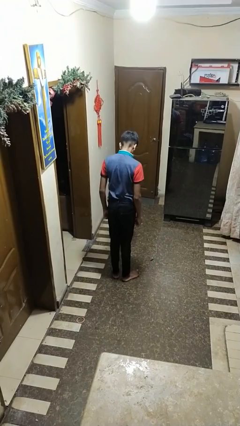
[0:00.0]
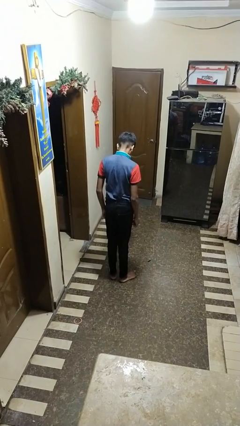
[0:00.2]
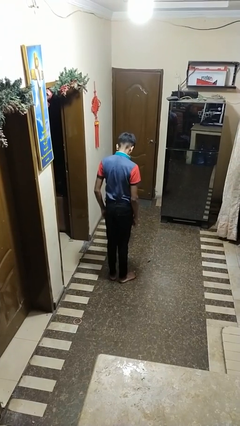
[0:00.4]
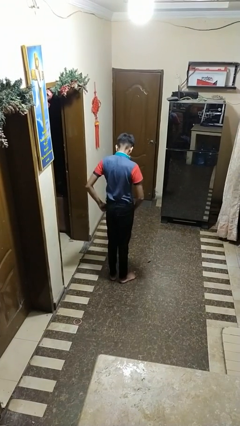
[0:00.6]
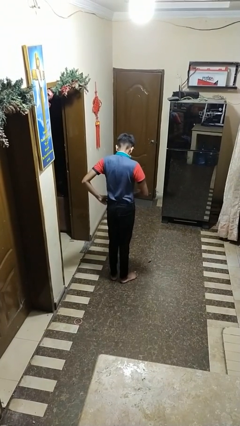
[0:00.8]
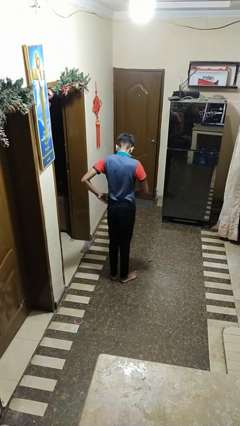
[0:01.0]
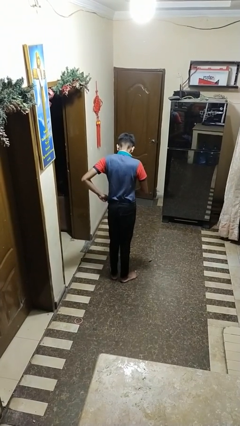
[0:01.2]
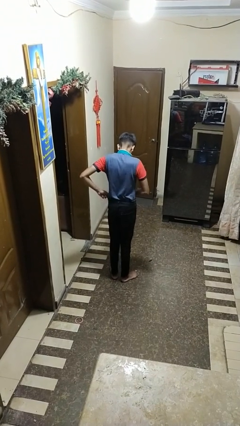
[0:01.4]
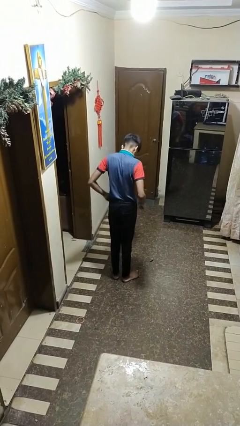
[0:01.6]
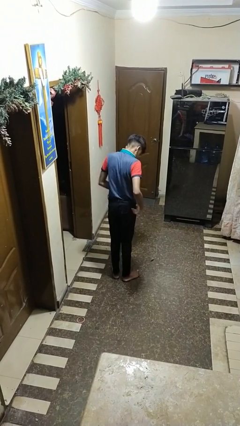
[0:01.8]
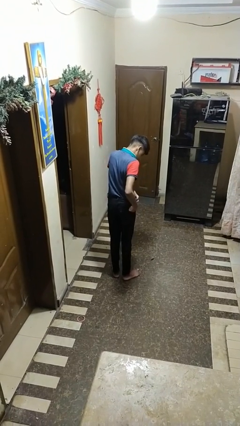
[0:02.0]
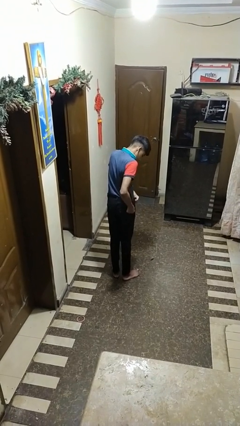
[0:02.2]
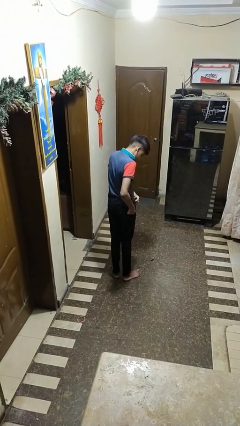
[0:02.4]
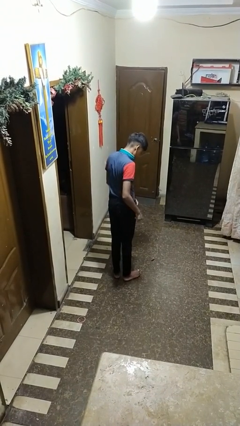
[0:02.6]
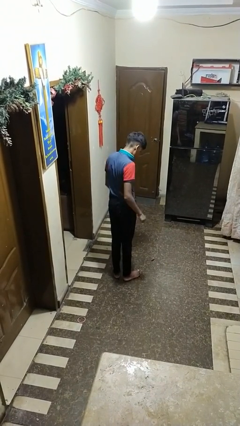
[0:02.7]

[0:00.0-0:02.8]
person hikes up pants

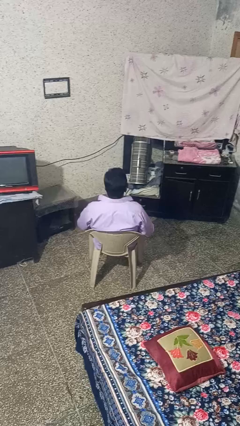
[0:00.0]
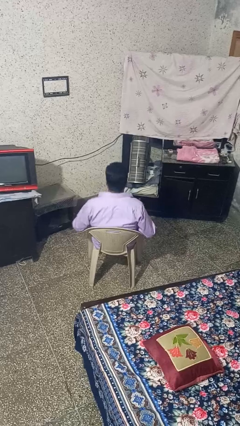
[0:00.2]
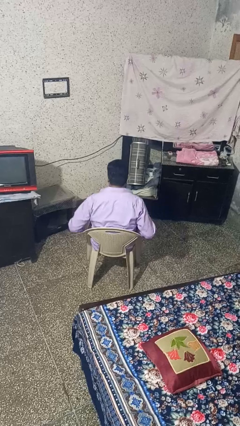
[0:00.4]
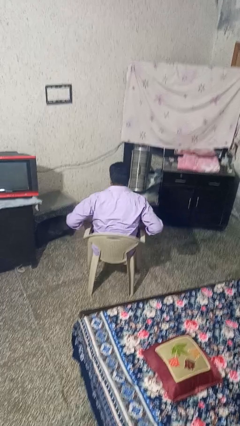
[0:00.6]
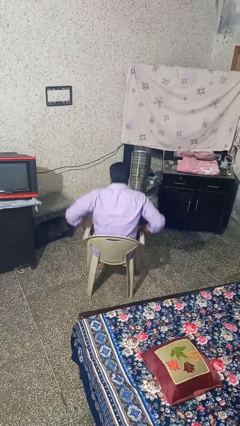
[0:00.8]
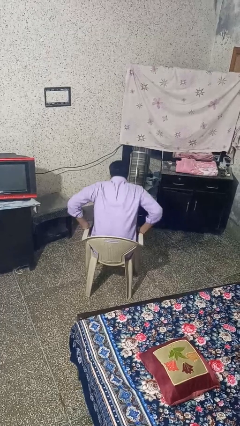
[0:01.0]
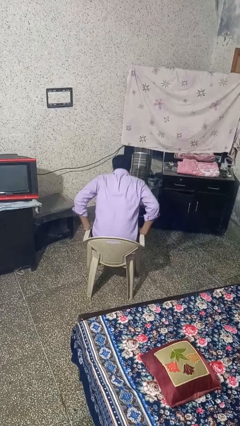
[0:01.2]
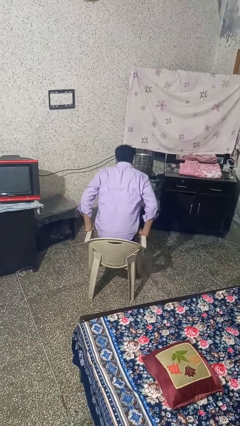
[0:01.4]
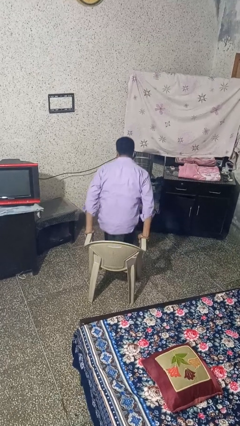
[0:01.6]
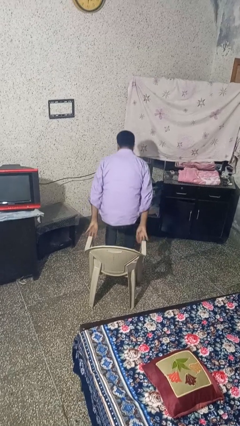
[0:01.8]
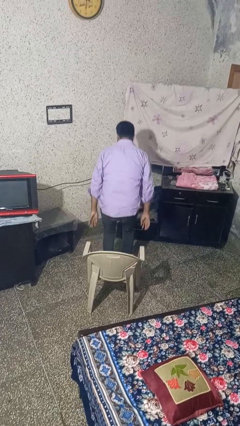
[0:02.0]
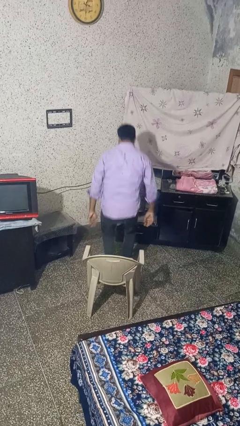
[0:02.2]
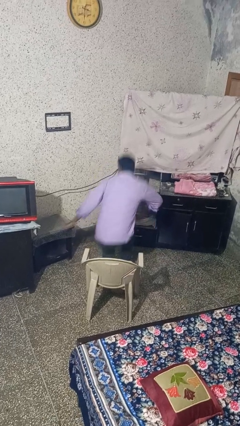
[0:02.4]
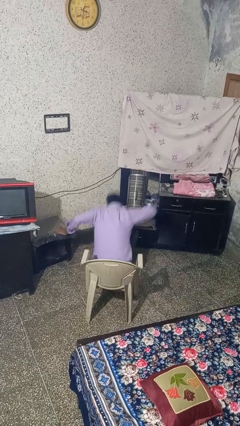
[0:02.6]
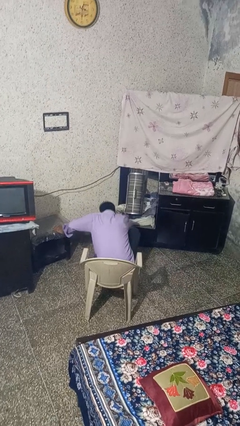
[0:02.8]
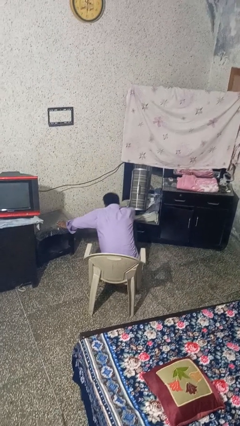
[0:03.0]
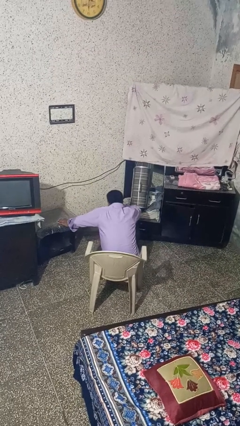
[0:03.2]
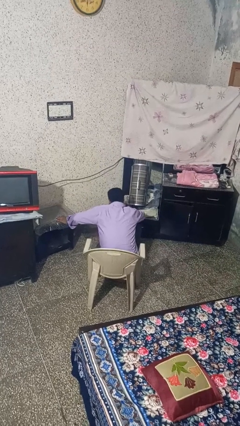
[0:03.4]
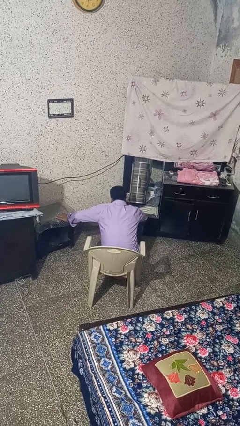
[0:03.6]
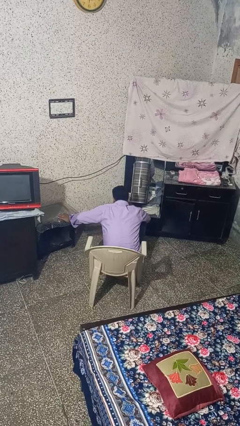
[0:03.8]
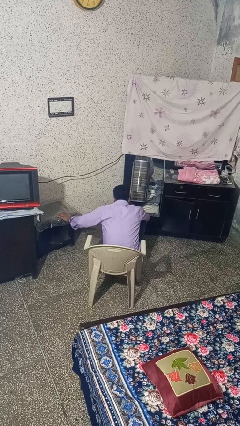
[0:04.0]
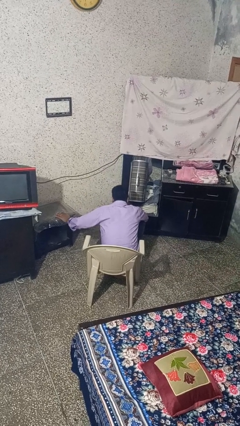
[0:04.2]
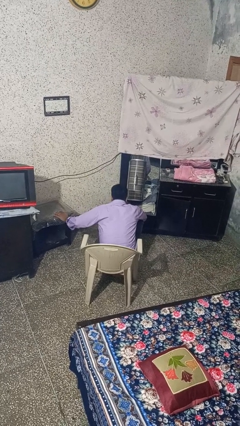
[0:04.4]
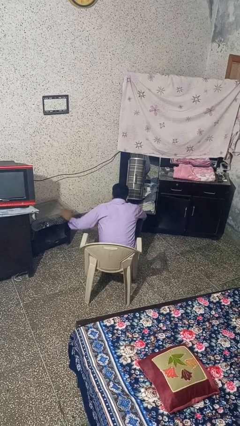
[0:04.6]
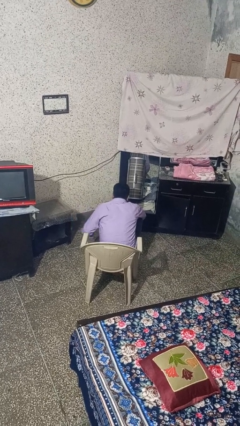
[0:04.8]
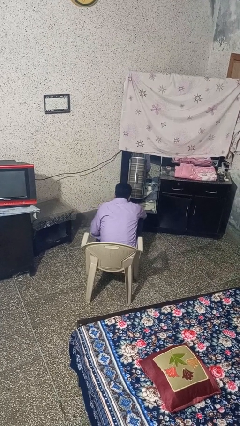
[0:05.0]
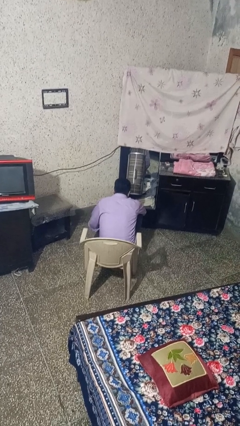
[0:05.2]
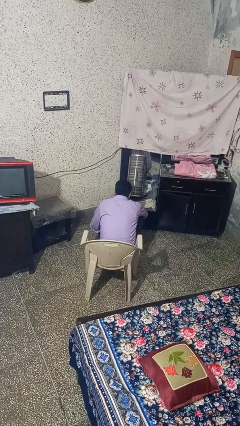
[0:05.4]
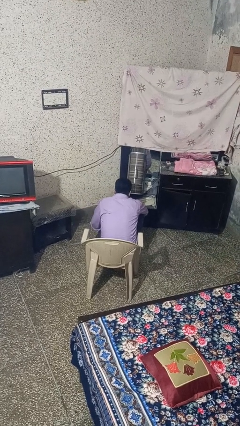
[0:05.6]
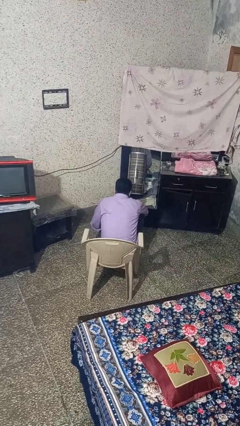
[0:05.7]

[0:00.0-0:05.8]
person falls from chair

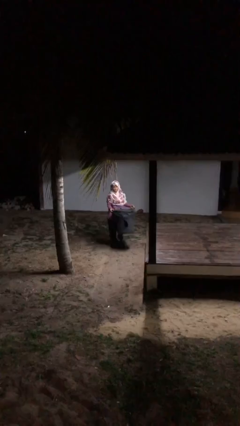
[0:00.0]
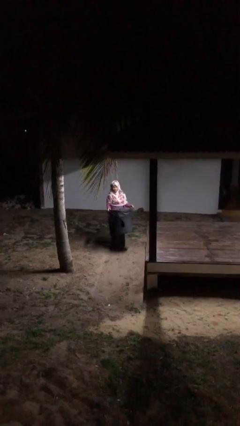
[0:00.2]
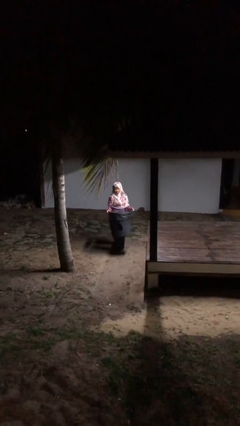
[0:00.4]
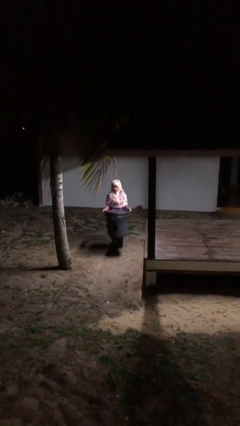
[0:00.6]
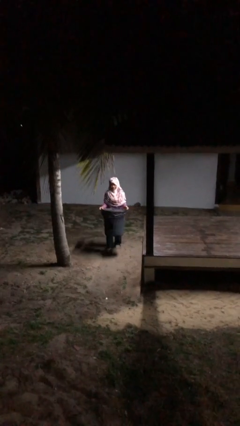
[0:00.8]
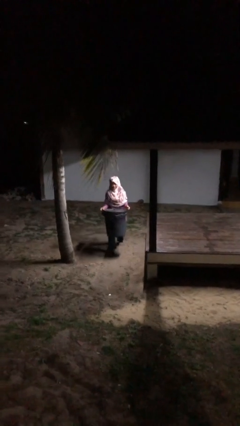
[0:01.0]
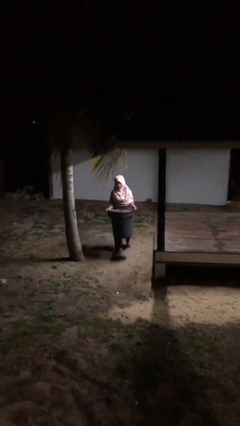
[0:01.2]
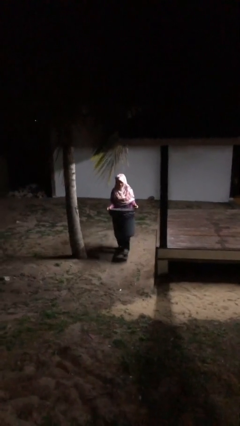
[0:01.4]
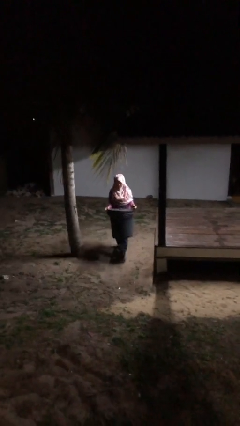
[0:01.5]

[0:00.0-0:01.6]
person carries heavy object

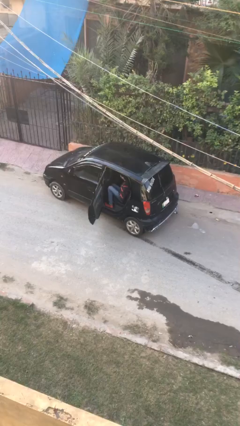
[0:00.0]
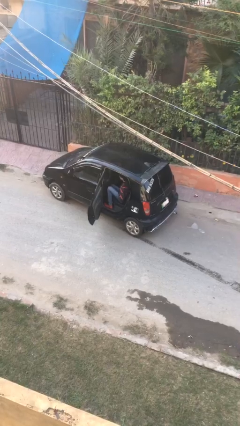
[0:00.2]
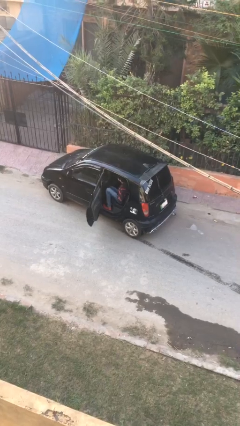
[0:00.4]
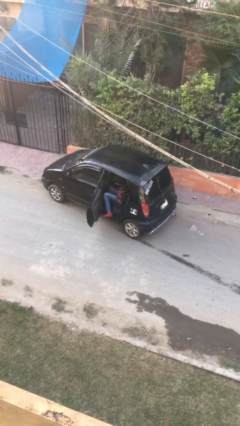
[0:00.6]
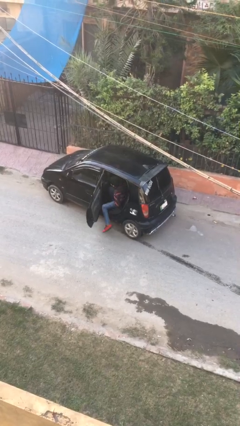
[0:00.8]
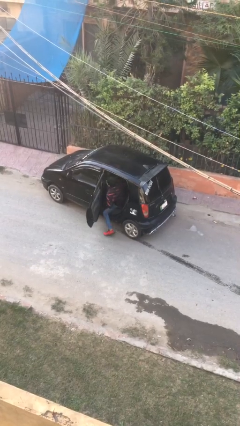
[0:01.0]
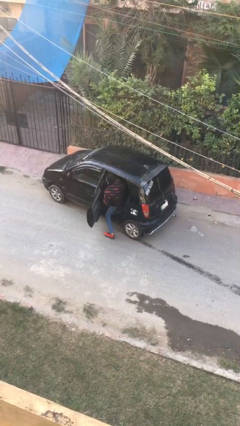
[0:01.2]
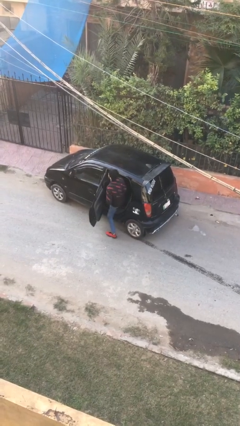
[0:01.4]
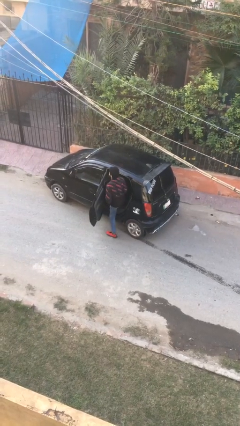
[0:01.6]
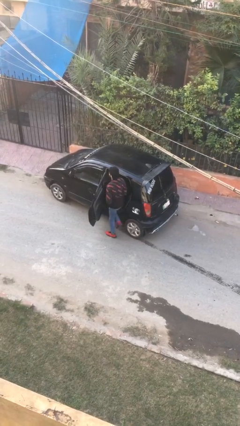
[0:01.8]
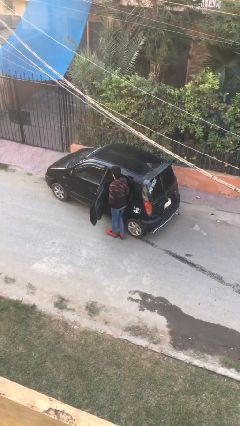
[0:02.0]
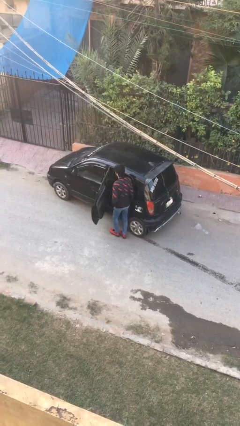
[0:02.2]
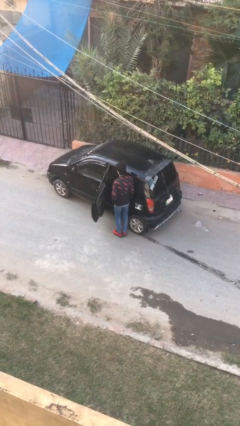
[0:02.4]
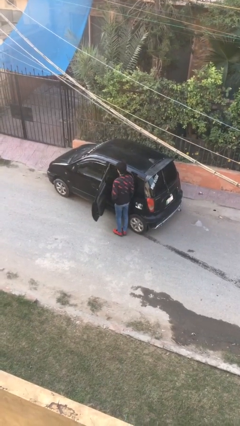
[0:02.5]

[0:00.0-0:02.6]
person exits car

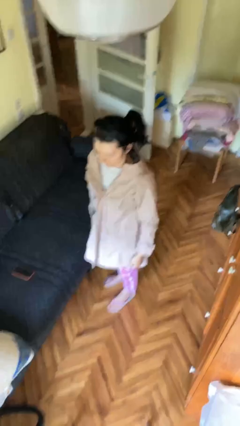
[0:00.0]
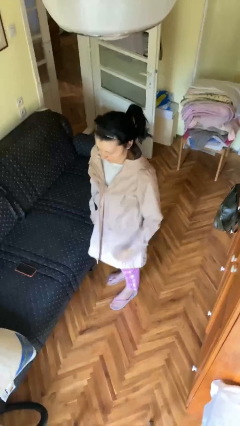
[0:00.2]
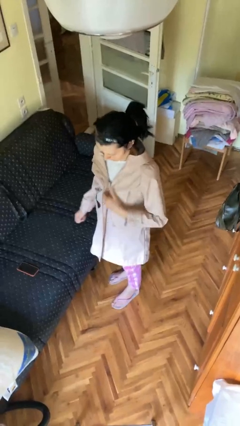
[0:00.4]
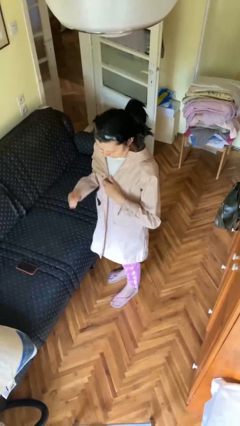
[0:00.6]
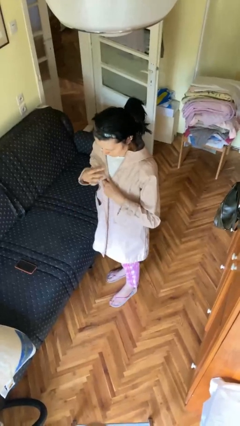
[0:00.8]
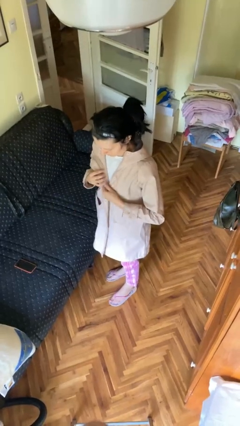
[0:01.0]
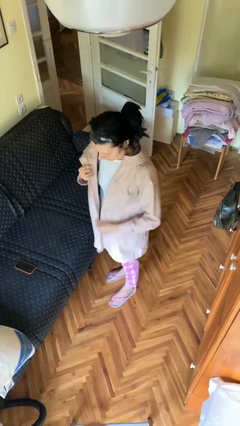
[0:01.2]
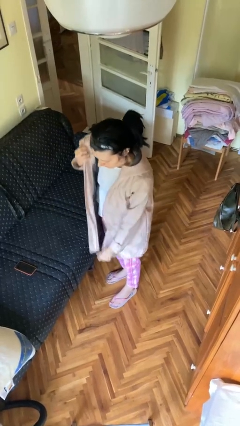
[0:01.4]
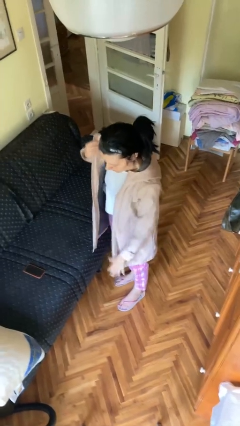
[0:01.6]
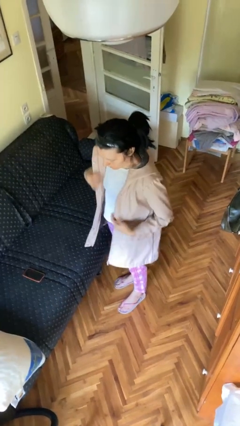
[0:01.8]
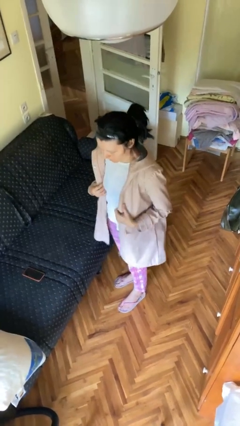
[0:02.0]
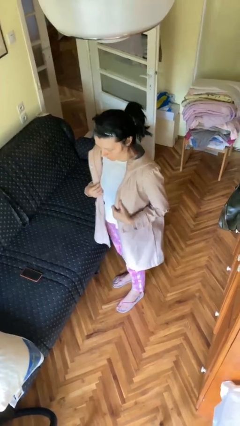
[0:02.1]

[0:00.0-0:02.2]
person unzips jacket

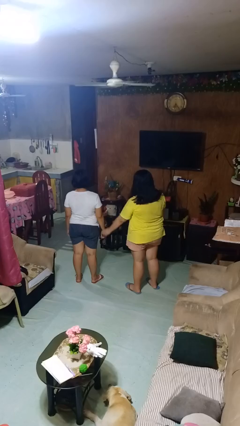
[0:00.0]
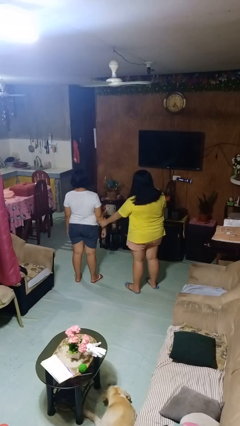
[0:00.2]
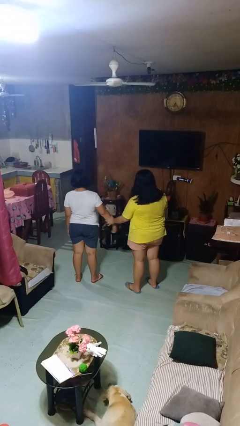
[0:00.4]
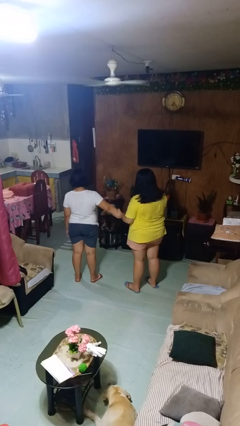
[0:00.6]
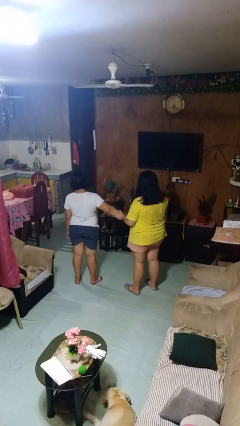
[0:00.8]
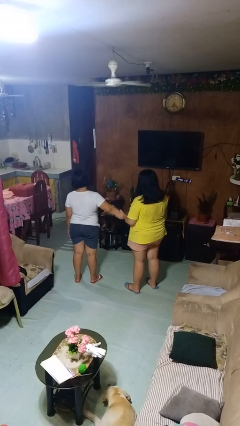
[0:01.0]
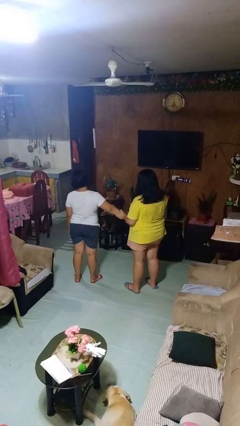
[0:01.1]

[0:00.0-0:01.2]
person grabs person by forearm

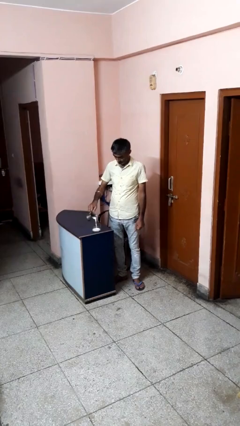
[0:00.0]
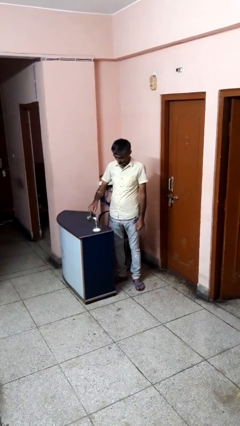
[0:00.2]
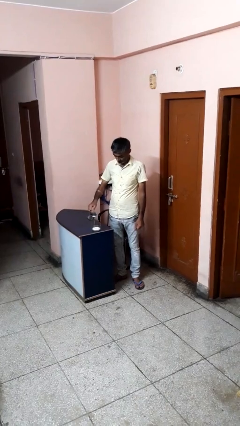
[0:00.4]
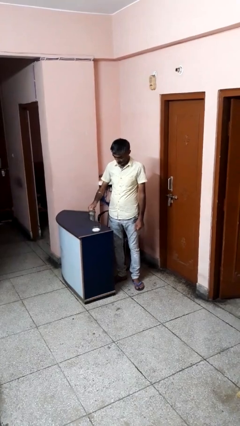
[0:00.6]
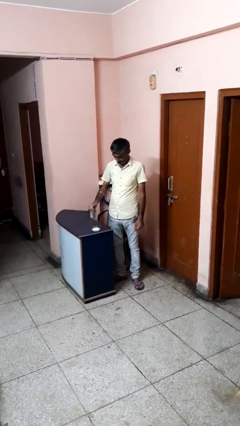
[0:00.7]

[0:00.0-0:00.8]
person pours into bowl

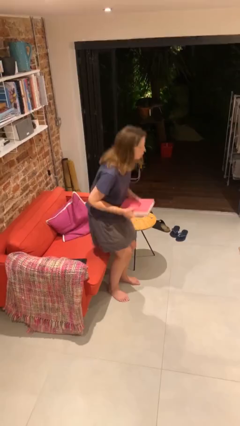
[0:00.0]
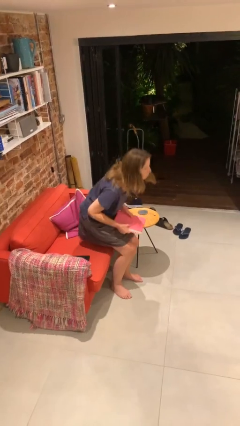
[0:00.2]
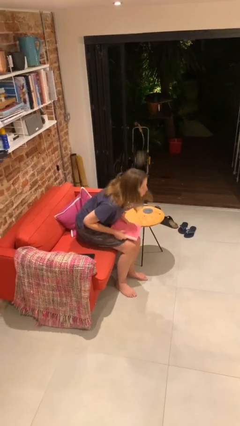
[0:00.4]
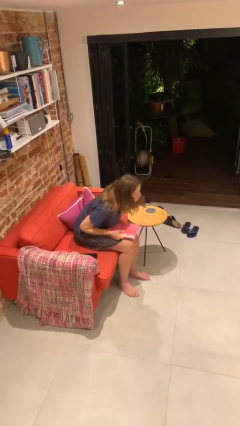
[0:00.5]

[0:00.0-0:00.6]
person sits down
